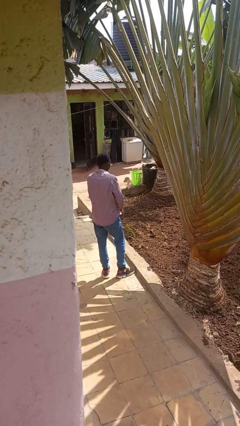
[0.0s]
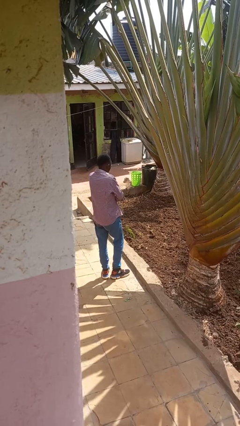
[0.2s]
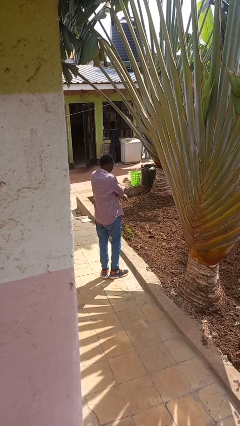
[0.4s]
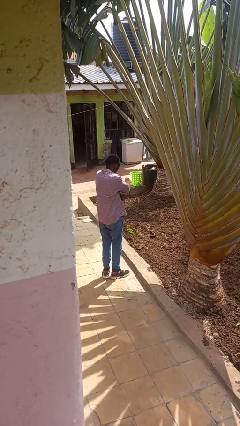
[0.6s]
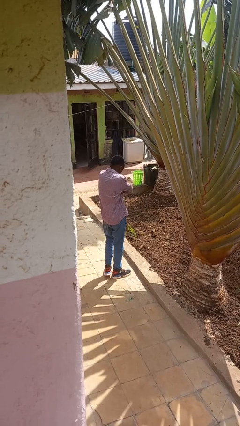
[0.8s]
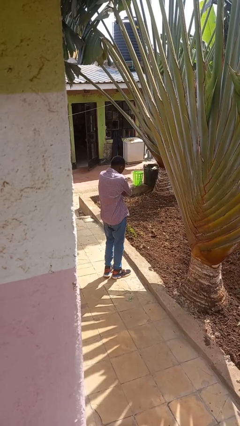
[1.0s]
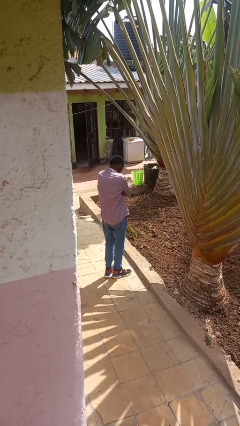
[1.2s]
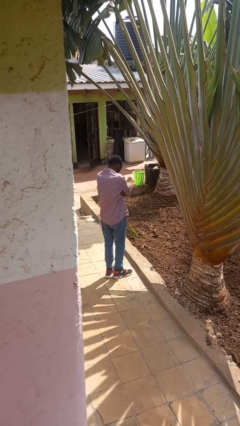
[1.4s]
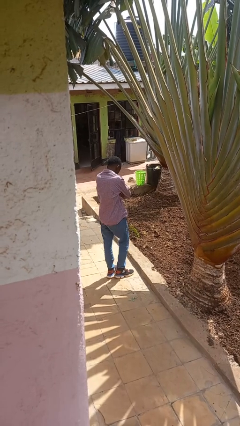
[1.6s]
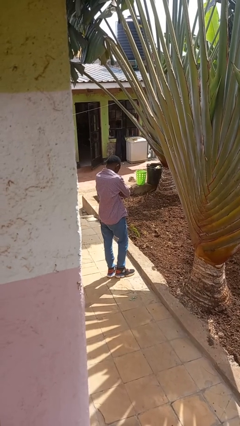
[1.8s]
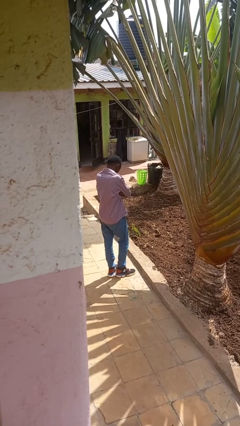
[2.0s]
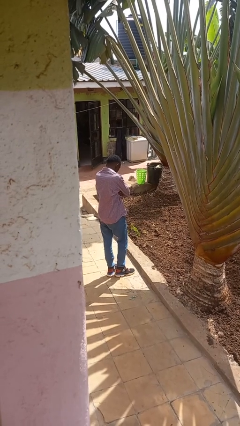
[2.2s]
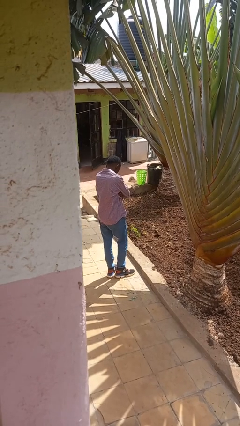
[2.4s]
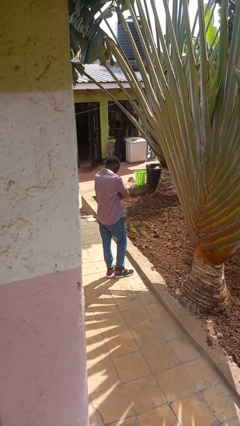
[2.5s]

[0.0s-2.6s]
person crosses arms

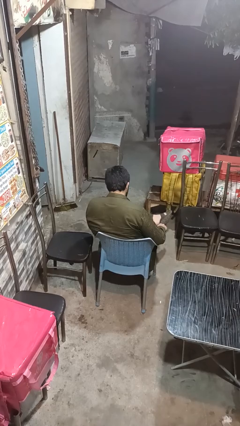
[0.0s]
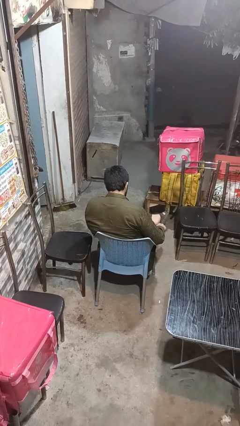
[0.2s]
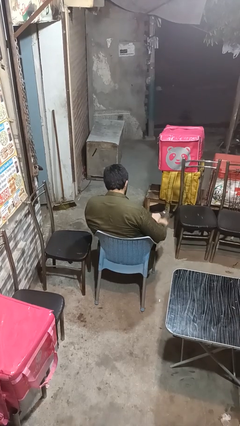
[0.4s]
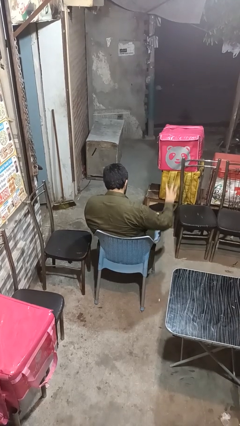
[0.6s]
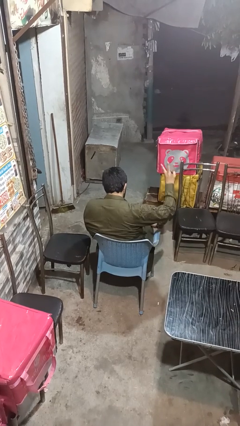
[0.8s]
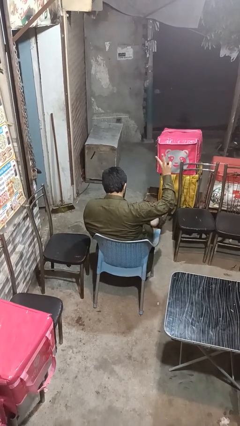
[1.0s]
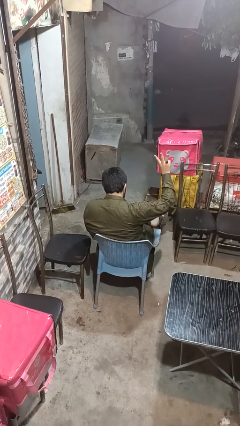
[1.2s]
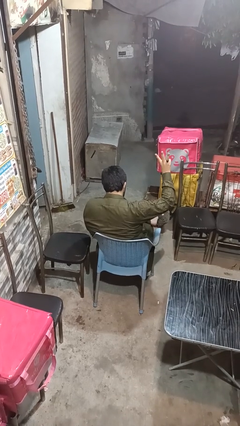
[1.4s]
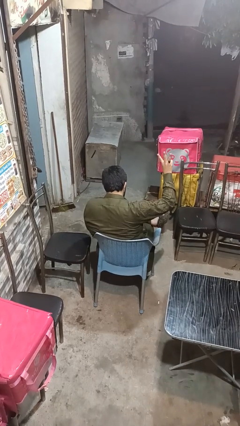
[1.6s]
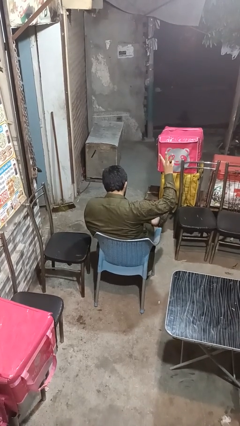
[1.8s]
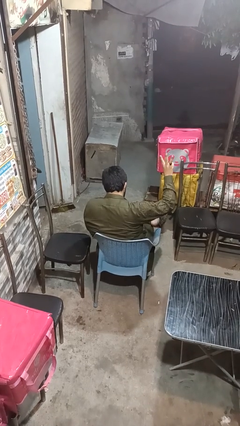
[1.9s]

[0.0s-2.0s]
person gestures number three

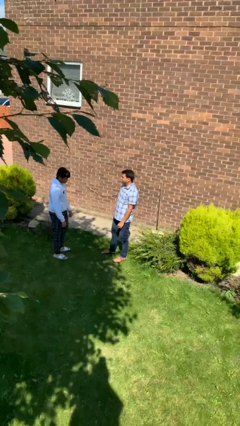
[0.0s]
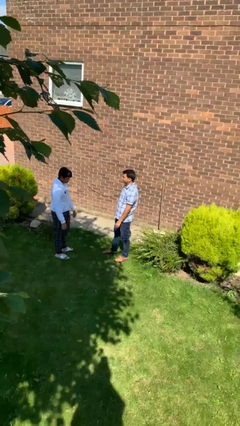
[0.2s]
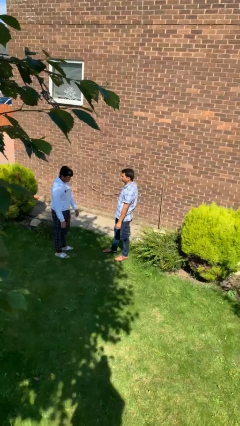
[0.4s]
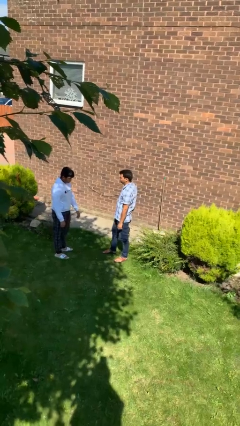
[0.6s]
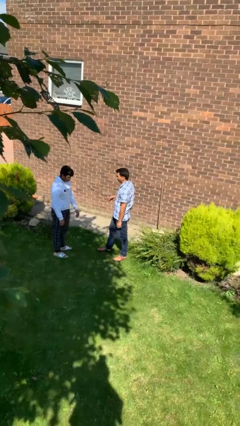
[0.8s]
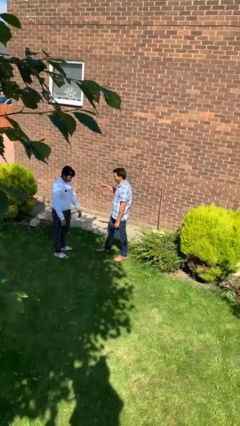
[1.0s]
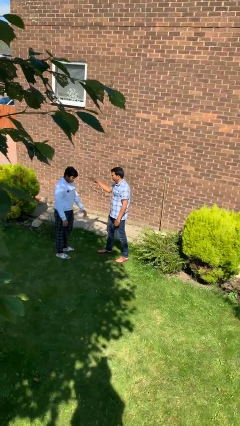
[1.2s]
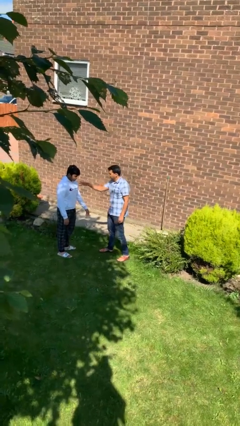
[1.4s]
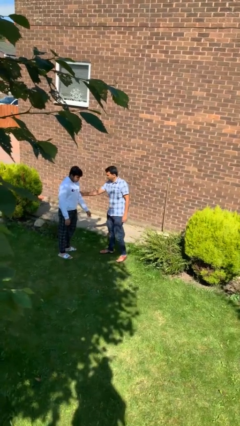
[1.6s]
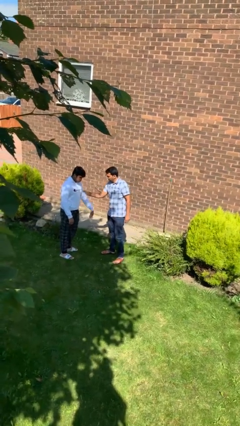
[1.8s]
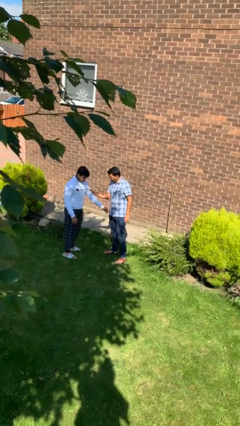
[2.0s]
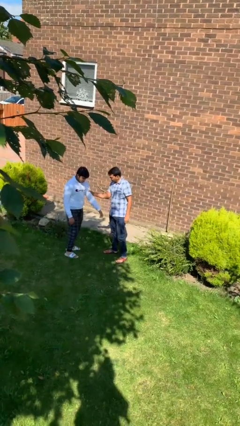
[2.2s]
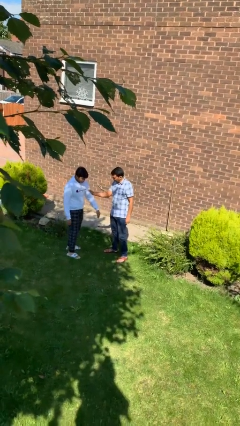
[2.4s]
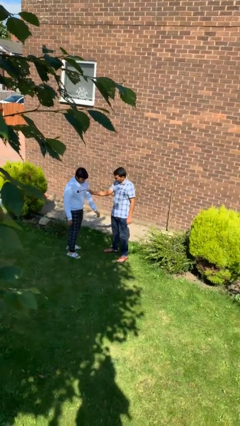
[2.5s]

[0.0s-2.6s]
person grabs person by bicep

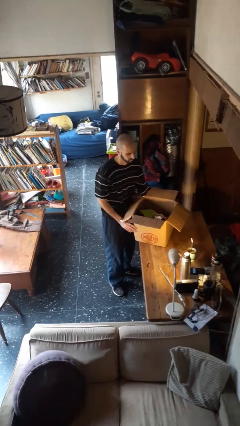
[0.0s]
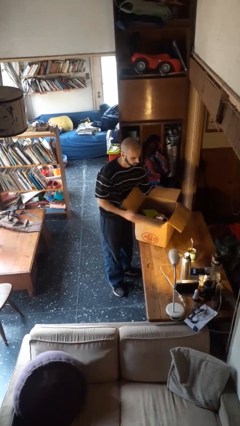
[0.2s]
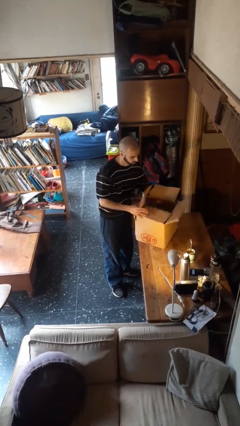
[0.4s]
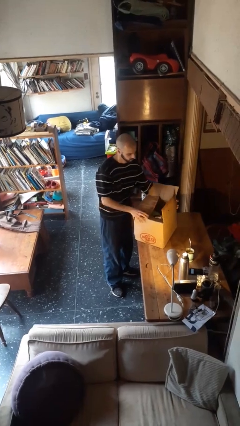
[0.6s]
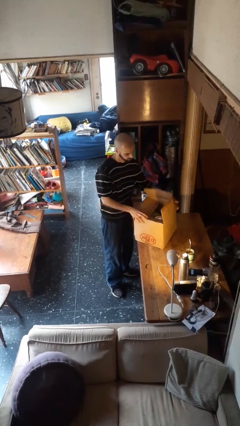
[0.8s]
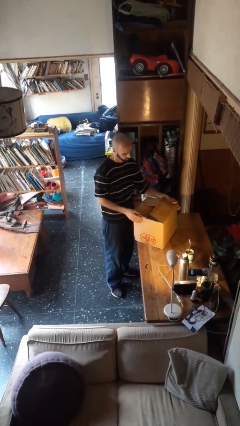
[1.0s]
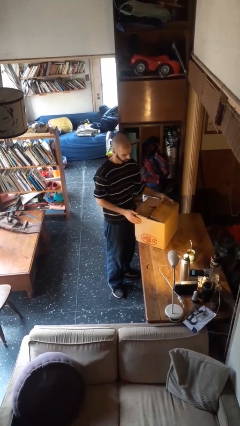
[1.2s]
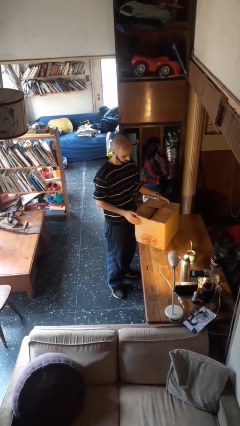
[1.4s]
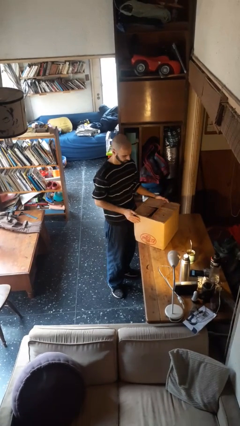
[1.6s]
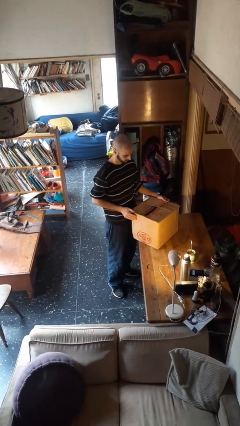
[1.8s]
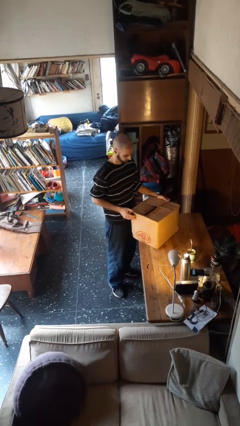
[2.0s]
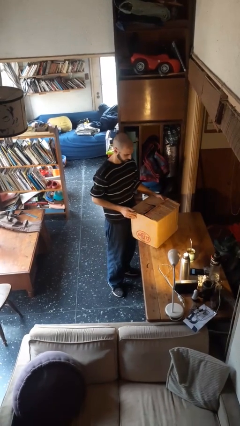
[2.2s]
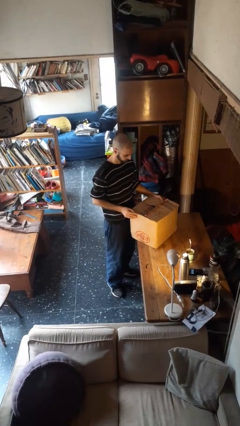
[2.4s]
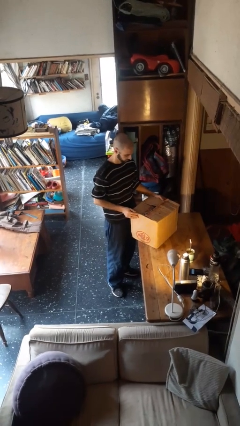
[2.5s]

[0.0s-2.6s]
person closes box

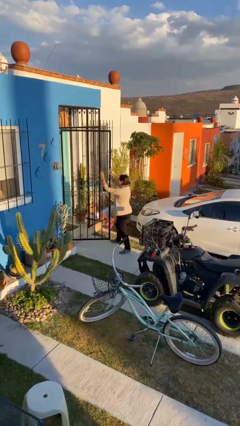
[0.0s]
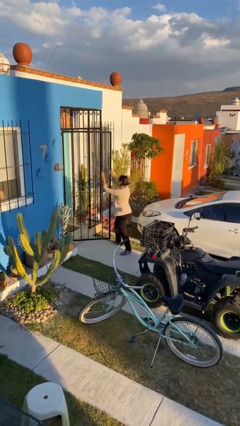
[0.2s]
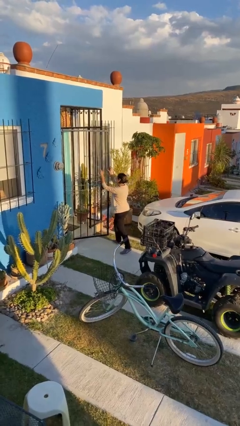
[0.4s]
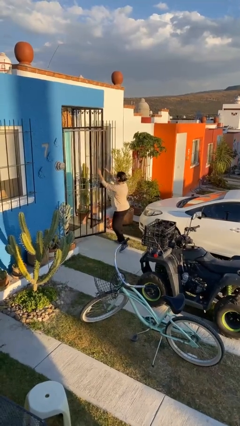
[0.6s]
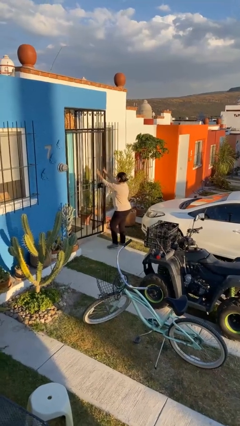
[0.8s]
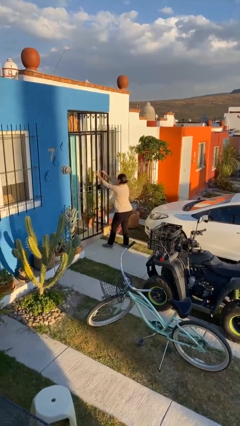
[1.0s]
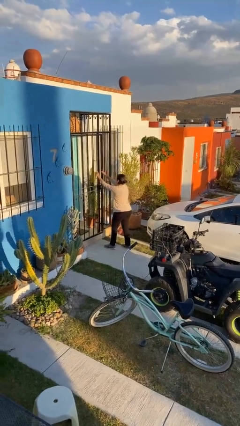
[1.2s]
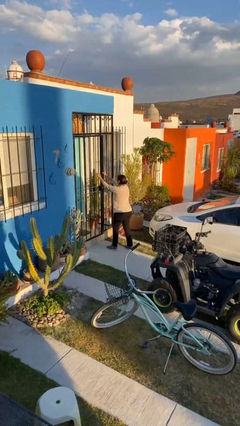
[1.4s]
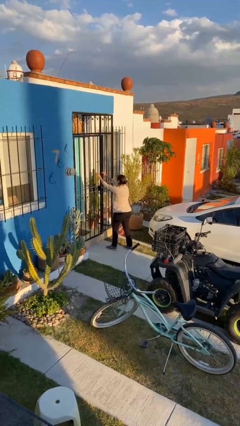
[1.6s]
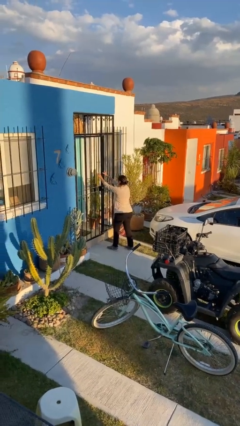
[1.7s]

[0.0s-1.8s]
person closes facility door

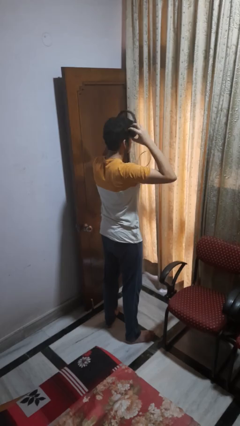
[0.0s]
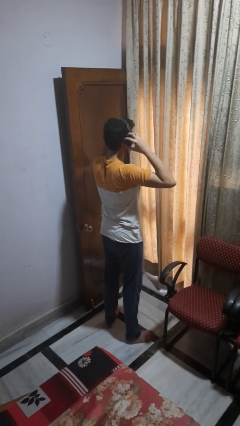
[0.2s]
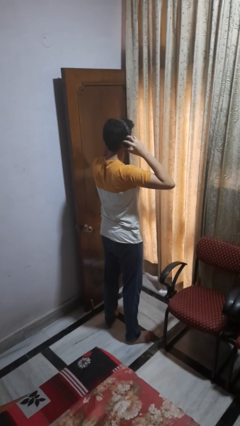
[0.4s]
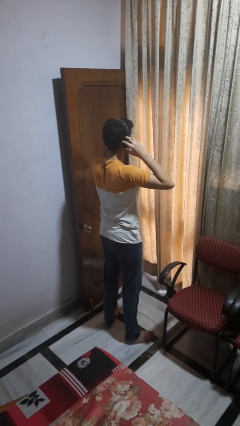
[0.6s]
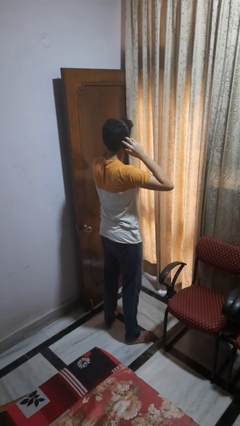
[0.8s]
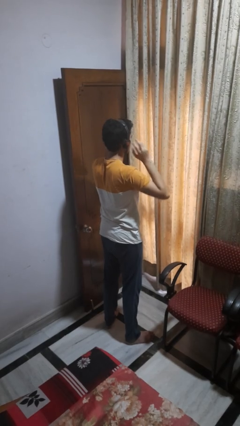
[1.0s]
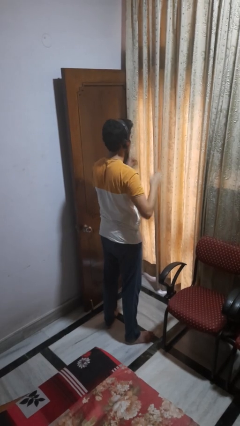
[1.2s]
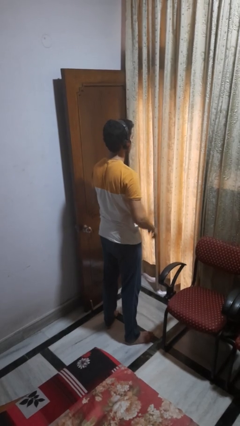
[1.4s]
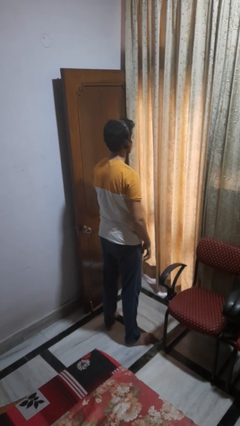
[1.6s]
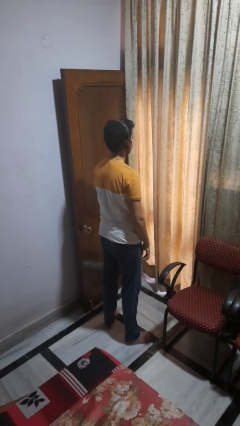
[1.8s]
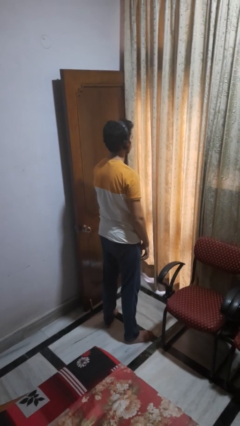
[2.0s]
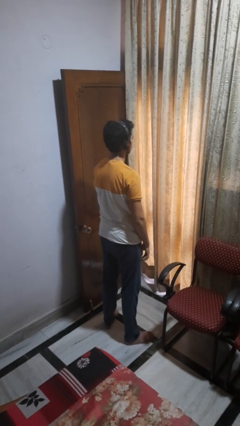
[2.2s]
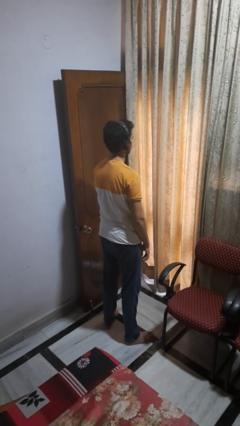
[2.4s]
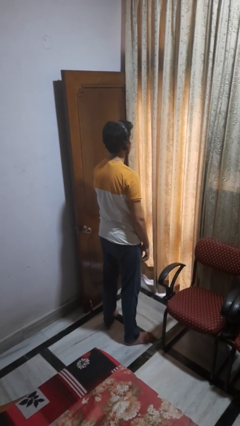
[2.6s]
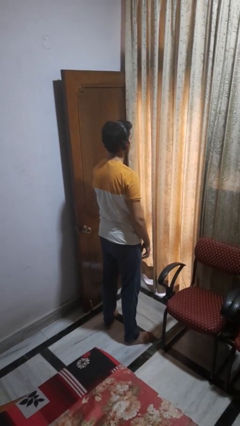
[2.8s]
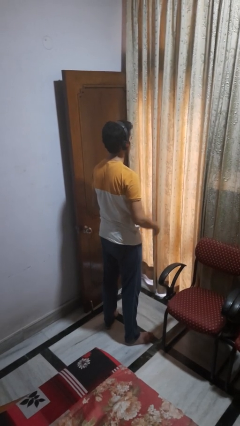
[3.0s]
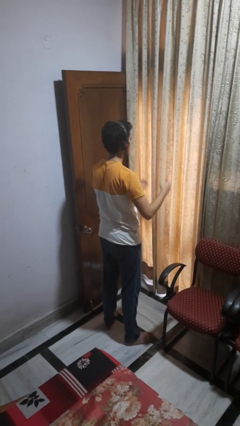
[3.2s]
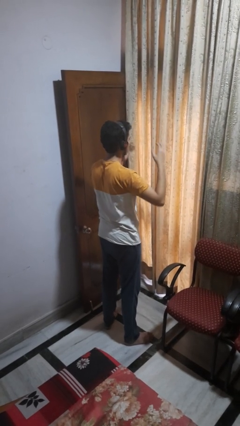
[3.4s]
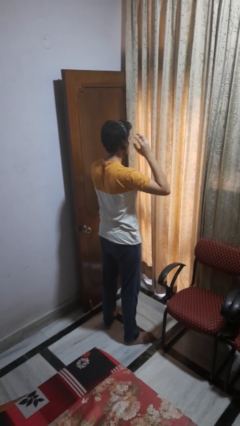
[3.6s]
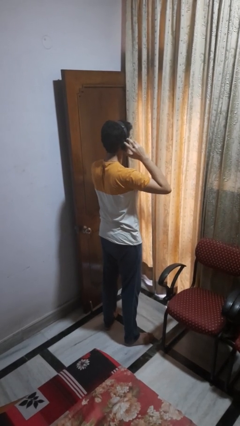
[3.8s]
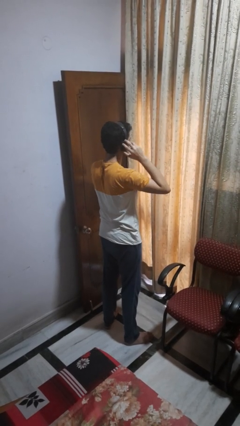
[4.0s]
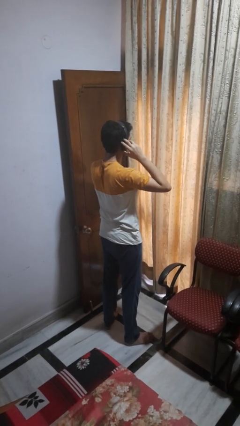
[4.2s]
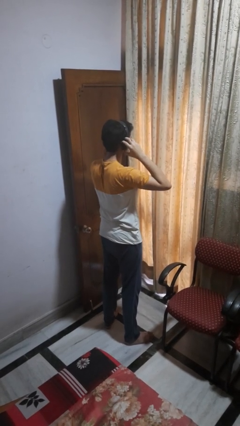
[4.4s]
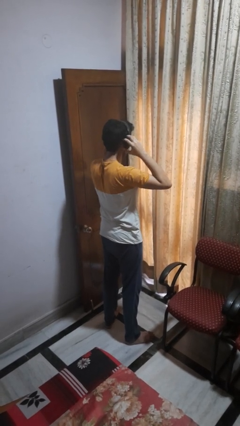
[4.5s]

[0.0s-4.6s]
person puts on headphones

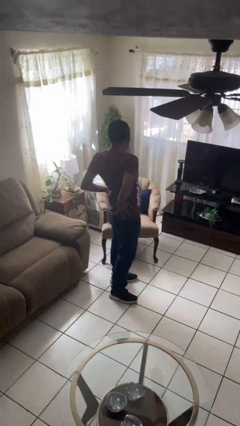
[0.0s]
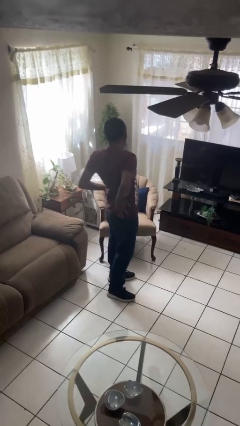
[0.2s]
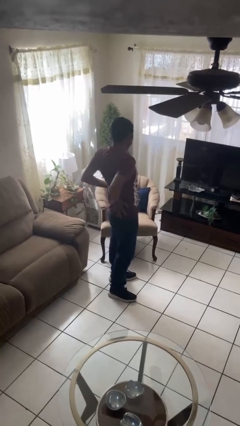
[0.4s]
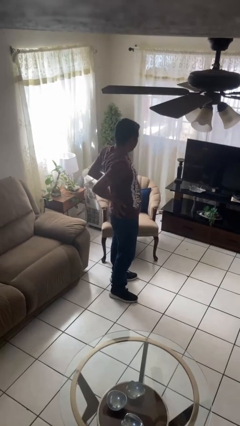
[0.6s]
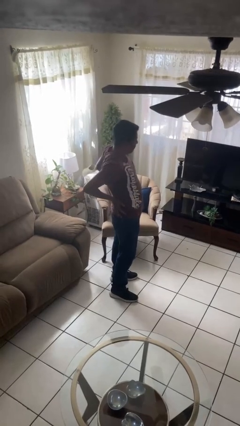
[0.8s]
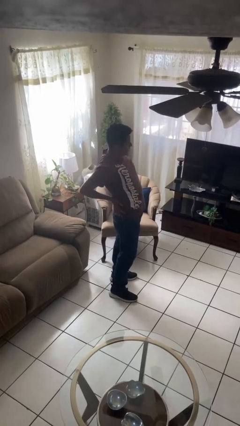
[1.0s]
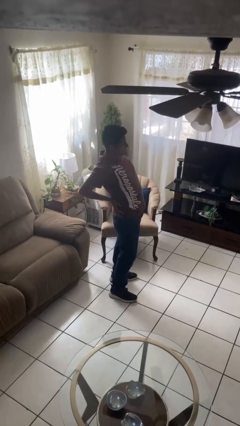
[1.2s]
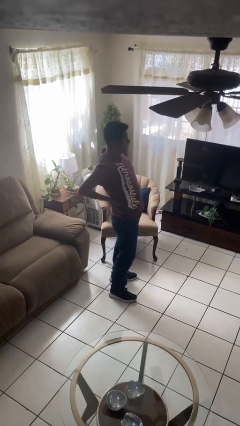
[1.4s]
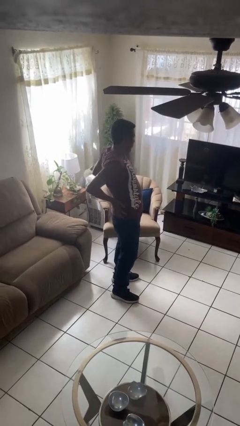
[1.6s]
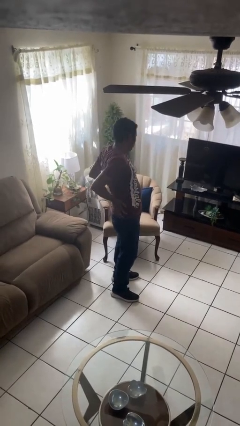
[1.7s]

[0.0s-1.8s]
person stretches back
